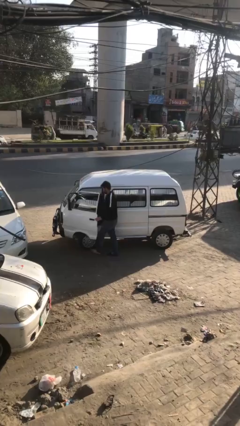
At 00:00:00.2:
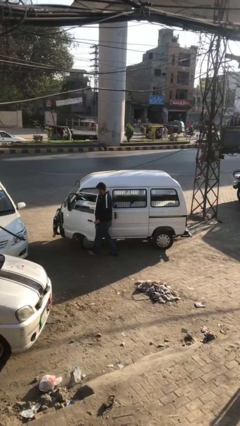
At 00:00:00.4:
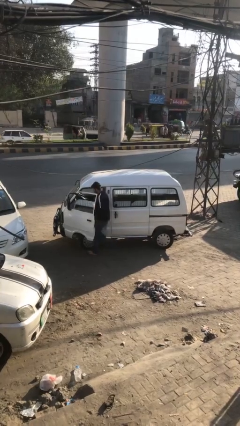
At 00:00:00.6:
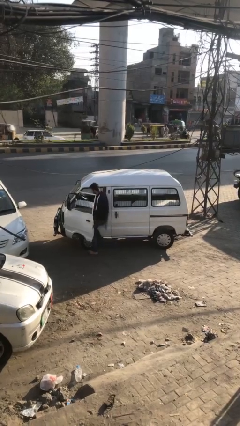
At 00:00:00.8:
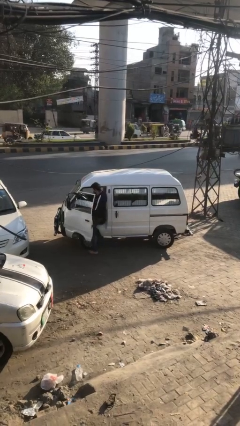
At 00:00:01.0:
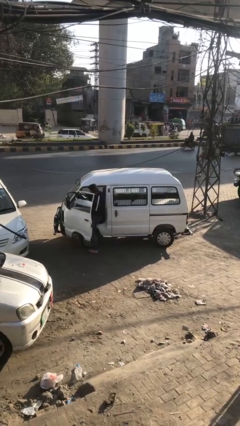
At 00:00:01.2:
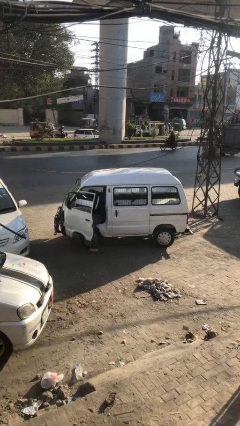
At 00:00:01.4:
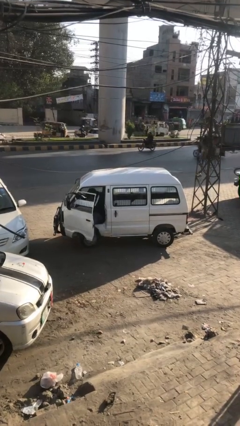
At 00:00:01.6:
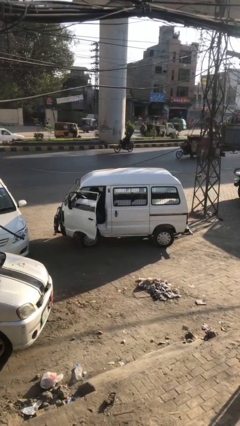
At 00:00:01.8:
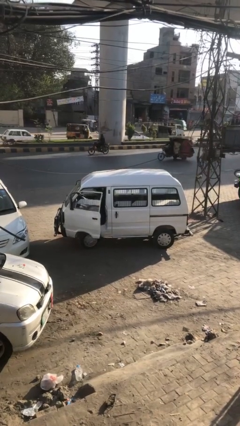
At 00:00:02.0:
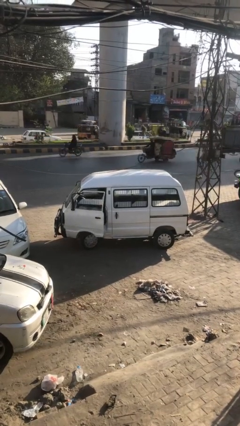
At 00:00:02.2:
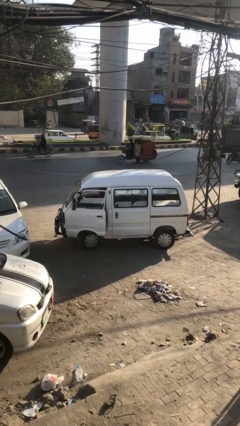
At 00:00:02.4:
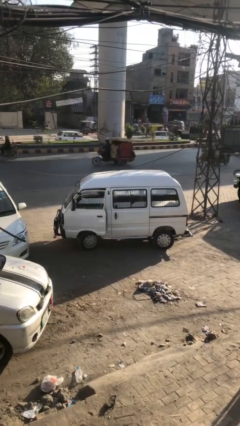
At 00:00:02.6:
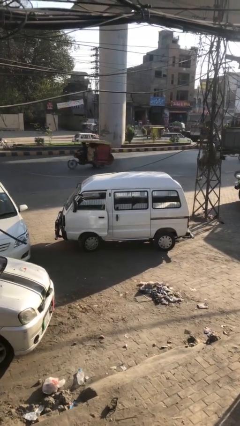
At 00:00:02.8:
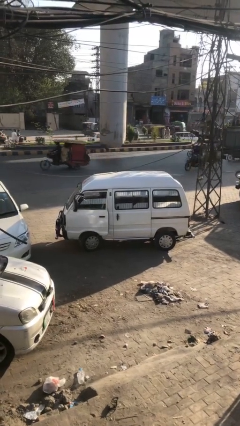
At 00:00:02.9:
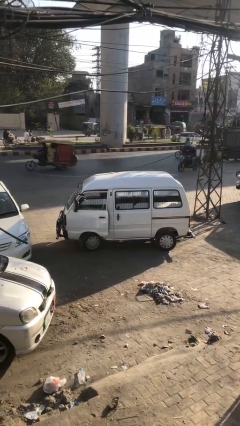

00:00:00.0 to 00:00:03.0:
car picks up person

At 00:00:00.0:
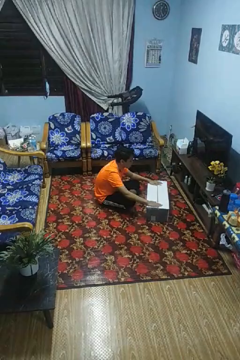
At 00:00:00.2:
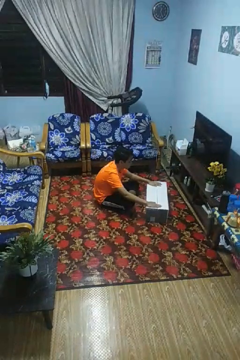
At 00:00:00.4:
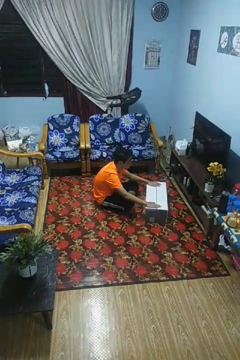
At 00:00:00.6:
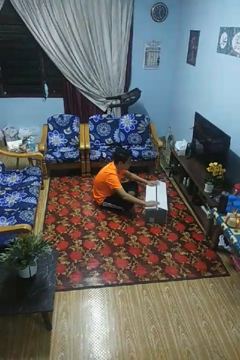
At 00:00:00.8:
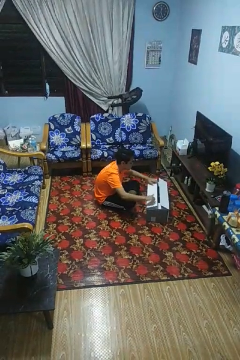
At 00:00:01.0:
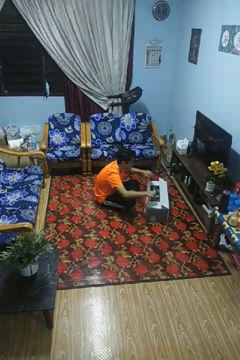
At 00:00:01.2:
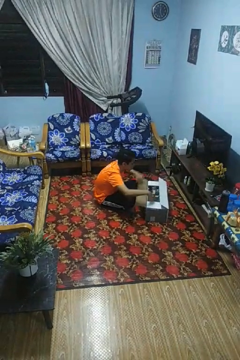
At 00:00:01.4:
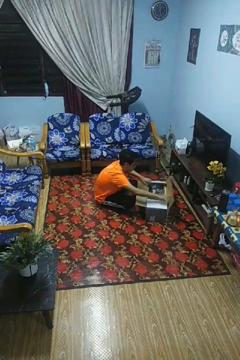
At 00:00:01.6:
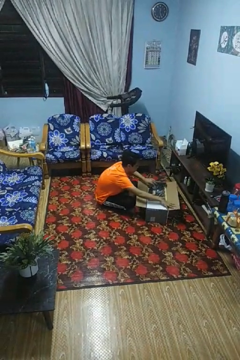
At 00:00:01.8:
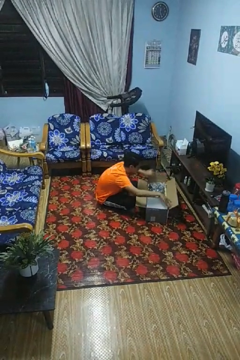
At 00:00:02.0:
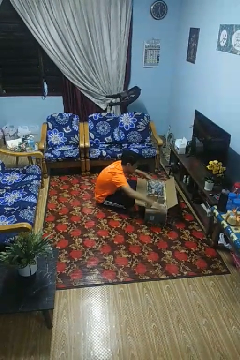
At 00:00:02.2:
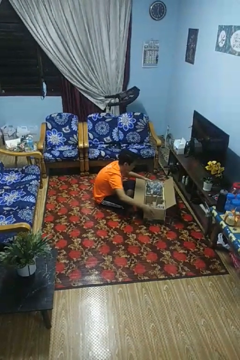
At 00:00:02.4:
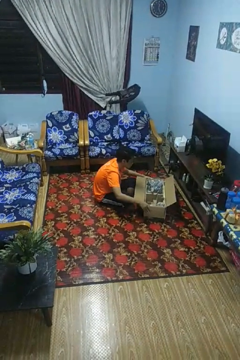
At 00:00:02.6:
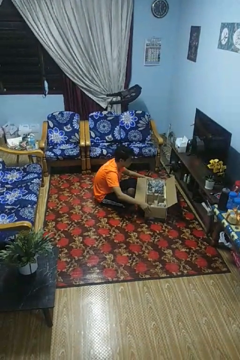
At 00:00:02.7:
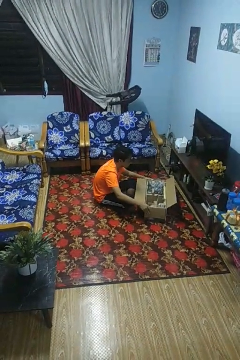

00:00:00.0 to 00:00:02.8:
person opens box

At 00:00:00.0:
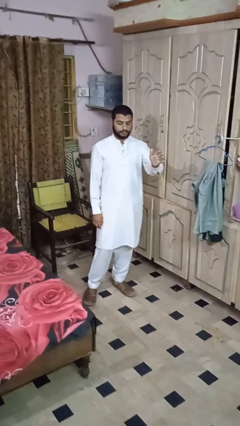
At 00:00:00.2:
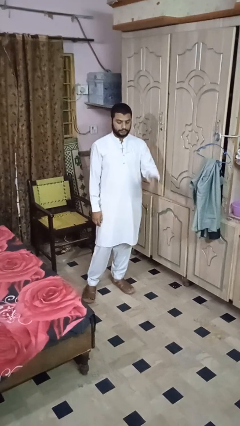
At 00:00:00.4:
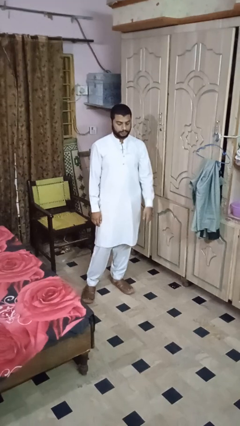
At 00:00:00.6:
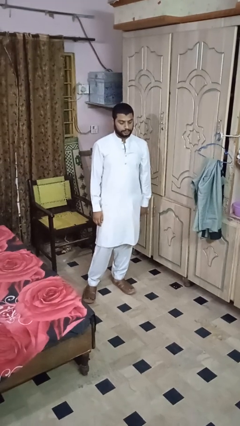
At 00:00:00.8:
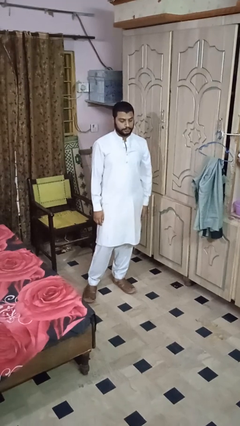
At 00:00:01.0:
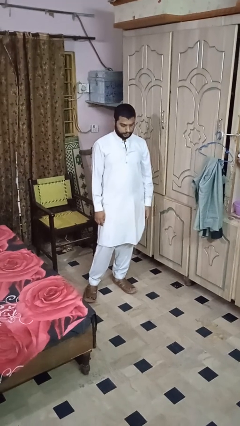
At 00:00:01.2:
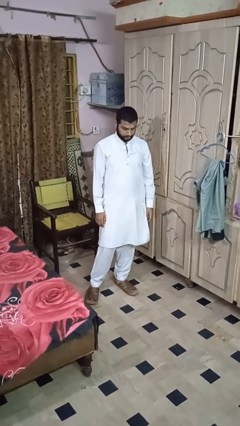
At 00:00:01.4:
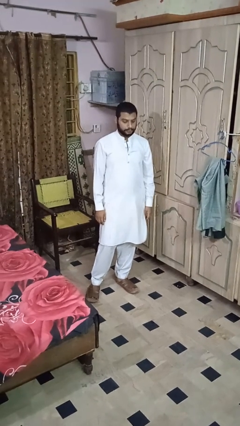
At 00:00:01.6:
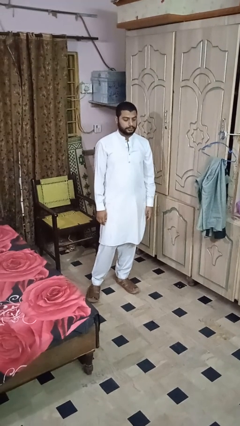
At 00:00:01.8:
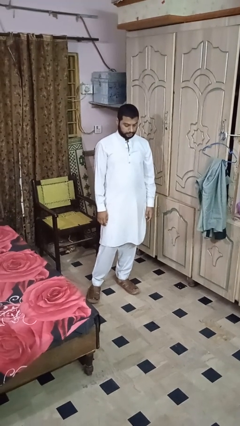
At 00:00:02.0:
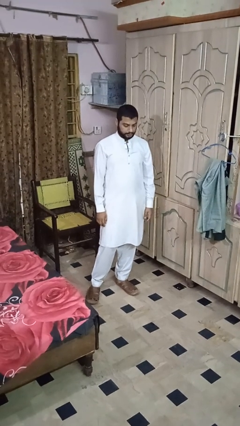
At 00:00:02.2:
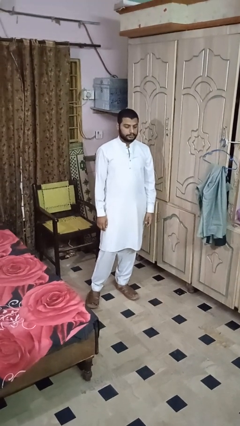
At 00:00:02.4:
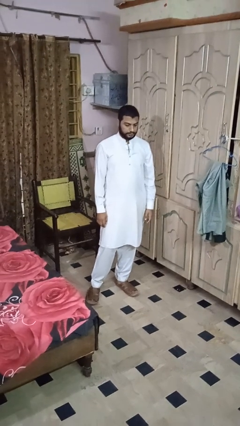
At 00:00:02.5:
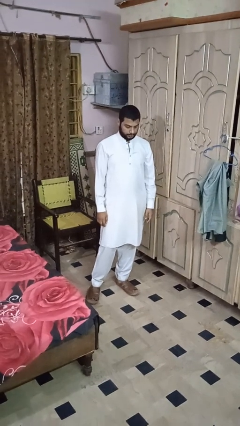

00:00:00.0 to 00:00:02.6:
person nods head

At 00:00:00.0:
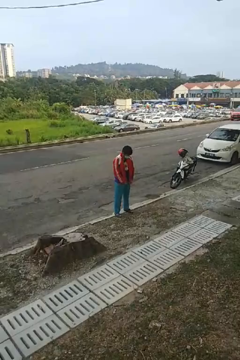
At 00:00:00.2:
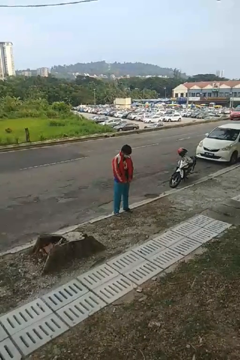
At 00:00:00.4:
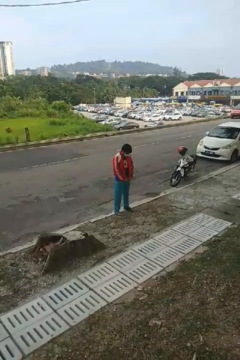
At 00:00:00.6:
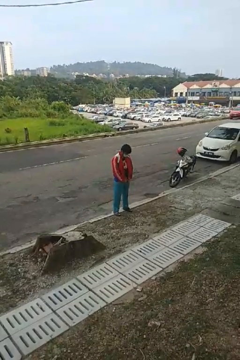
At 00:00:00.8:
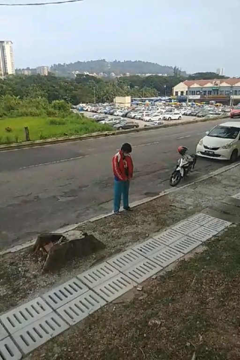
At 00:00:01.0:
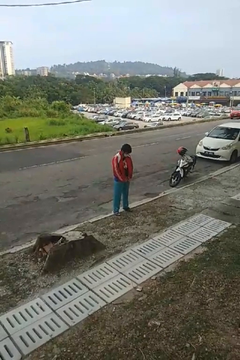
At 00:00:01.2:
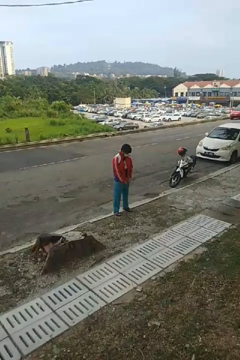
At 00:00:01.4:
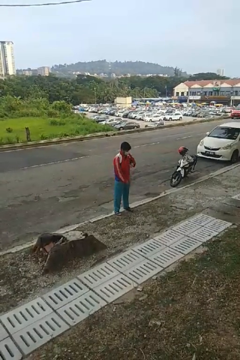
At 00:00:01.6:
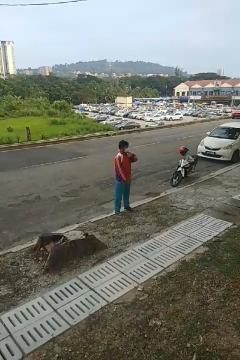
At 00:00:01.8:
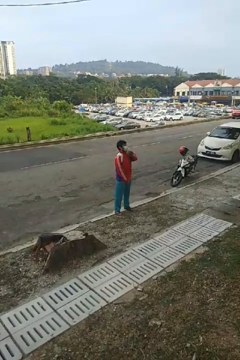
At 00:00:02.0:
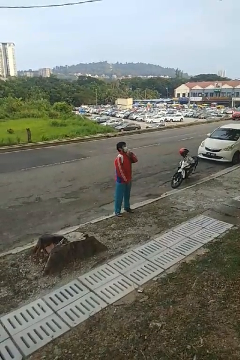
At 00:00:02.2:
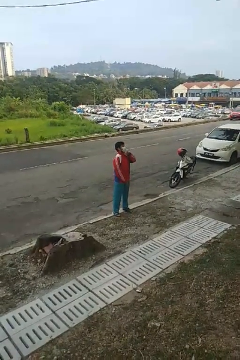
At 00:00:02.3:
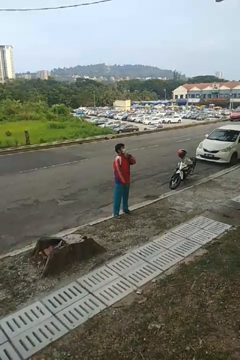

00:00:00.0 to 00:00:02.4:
person zips up jacket

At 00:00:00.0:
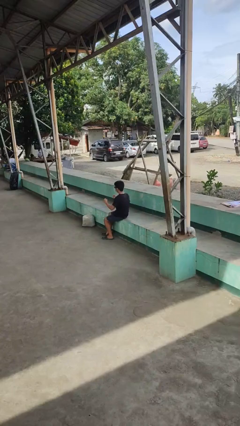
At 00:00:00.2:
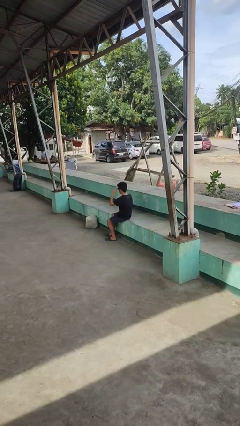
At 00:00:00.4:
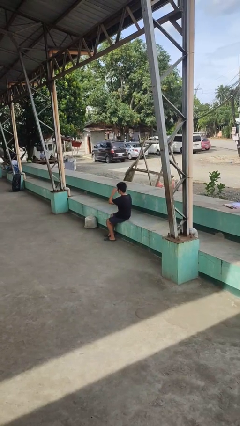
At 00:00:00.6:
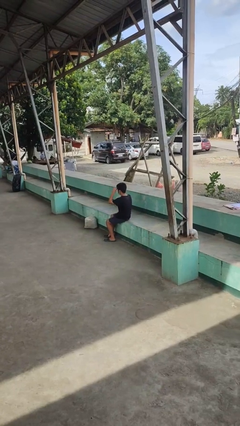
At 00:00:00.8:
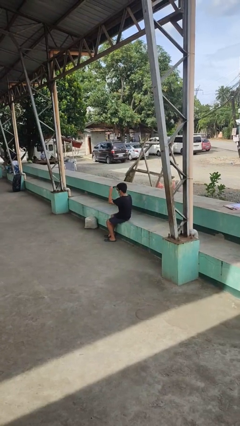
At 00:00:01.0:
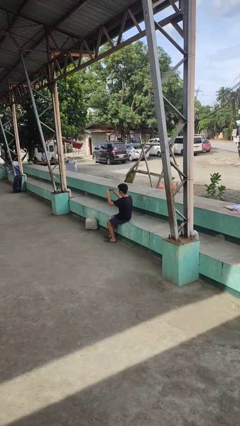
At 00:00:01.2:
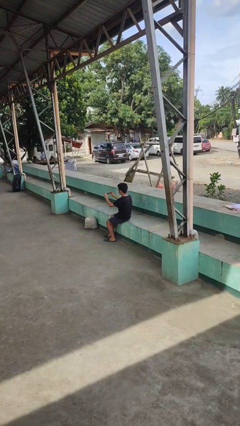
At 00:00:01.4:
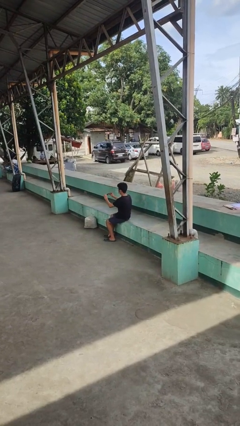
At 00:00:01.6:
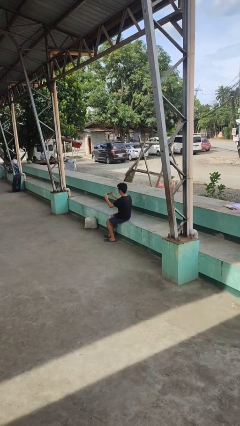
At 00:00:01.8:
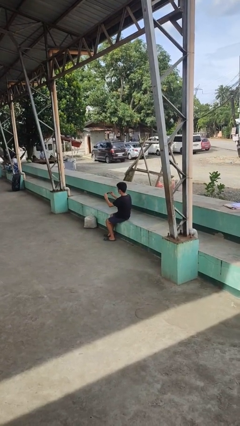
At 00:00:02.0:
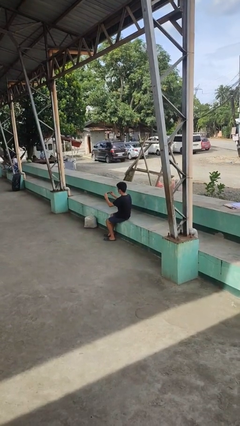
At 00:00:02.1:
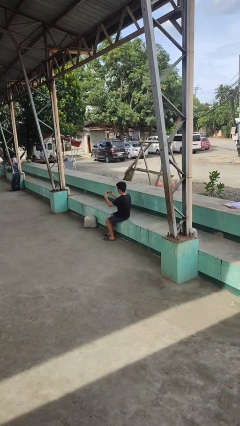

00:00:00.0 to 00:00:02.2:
person takes off sunglasses

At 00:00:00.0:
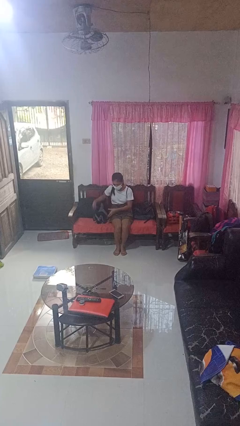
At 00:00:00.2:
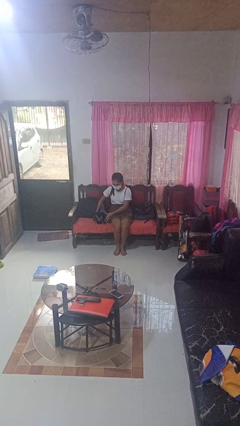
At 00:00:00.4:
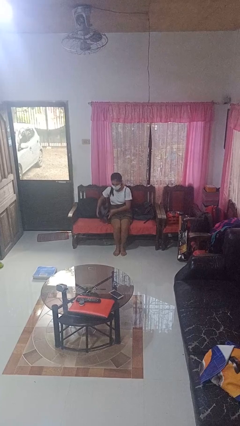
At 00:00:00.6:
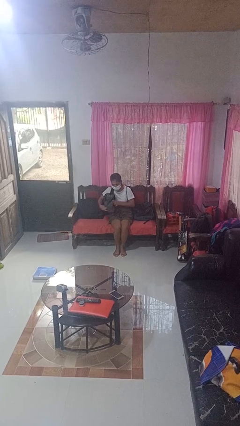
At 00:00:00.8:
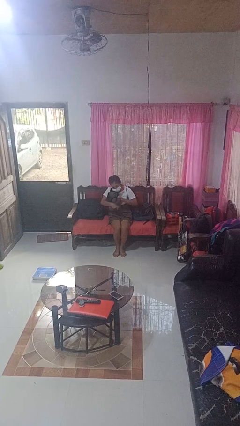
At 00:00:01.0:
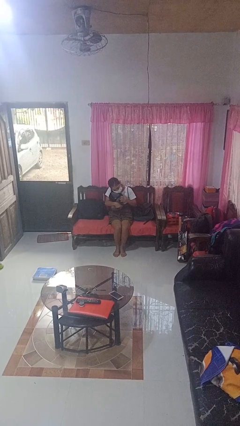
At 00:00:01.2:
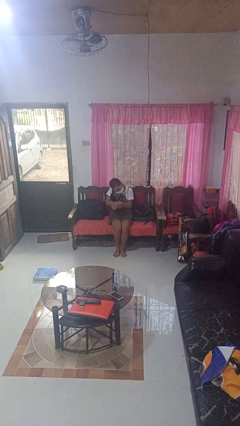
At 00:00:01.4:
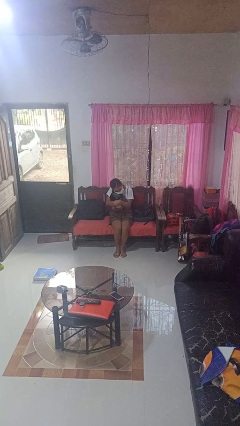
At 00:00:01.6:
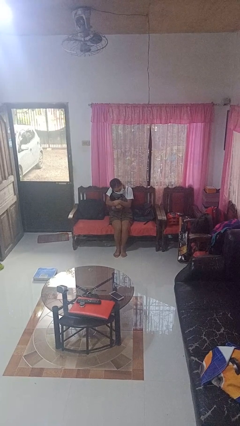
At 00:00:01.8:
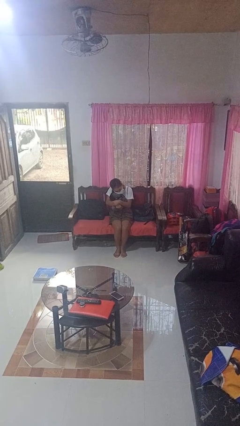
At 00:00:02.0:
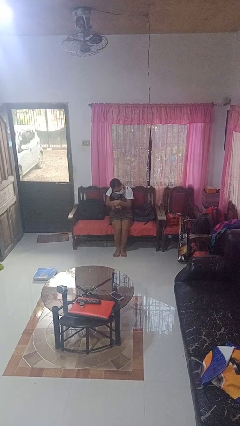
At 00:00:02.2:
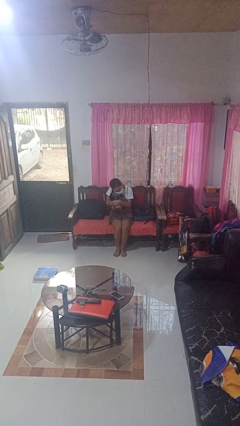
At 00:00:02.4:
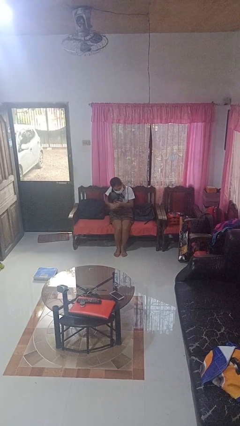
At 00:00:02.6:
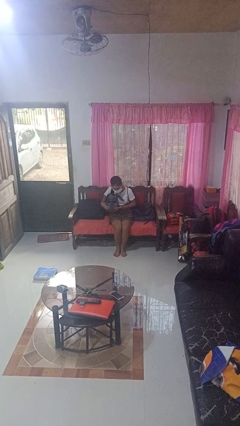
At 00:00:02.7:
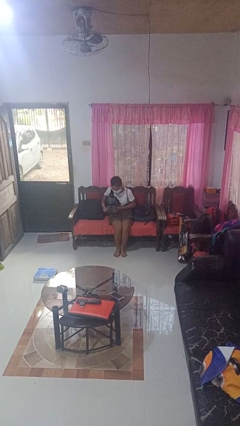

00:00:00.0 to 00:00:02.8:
person hugs stuffed animal

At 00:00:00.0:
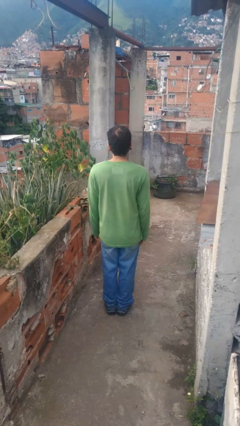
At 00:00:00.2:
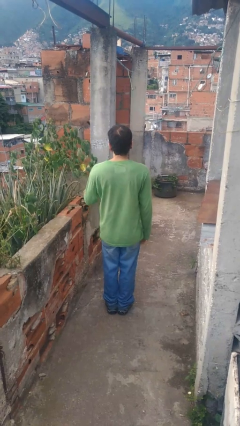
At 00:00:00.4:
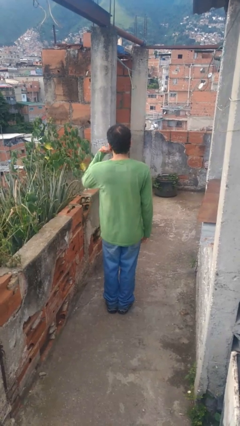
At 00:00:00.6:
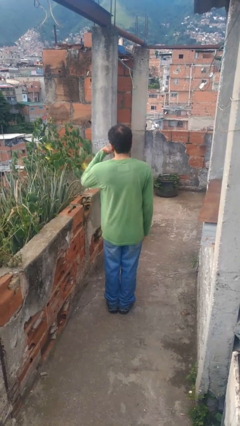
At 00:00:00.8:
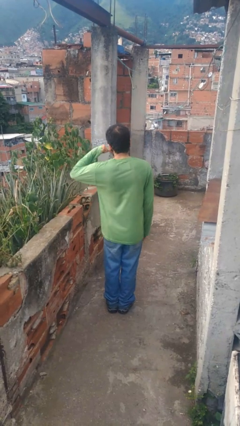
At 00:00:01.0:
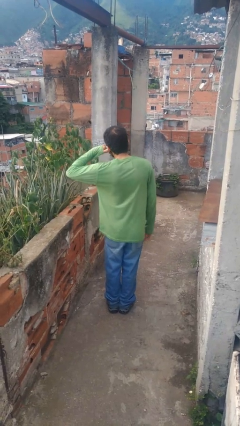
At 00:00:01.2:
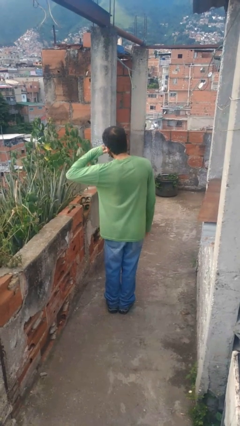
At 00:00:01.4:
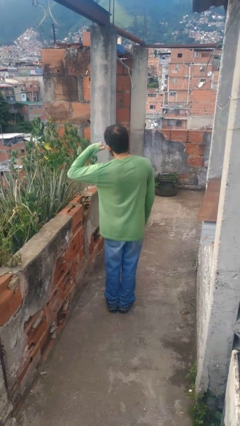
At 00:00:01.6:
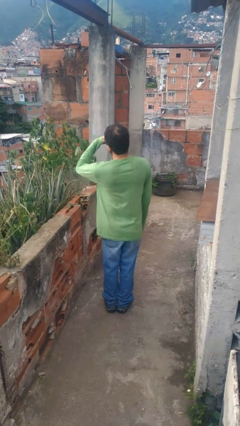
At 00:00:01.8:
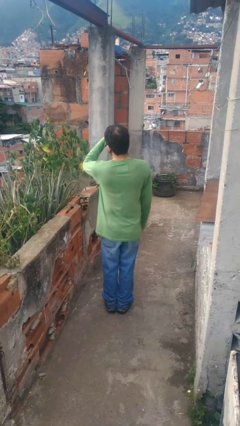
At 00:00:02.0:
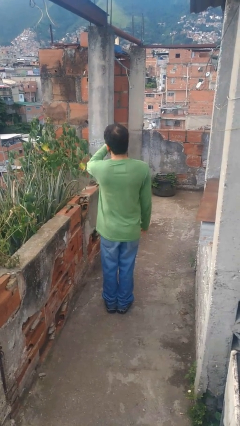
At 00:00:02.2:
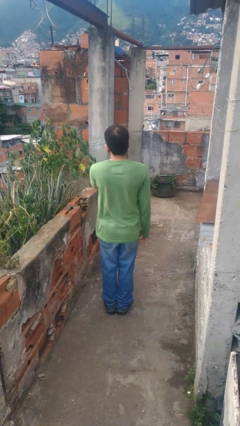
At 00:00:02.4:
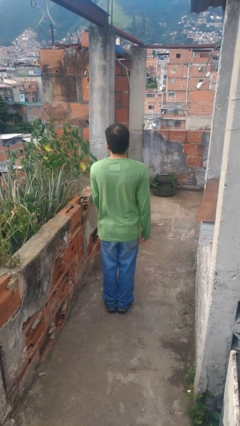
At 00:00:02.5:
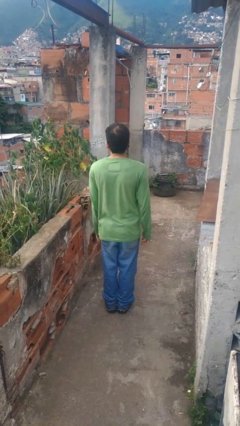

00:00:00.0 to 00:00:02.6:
person gestures call me
